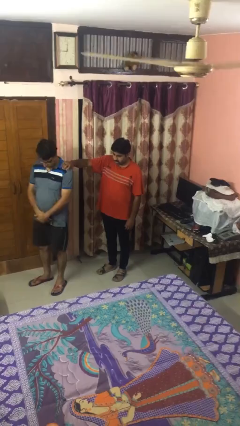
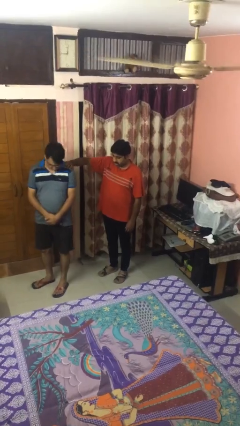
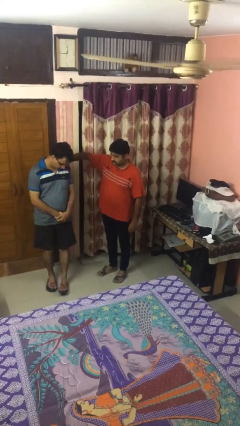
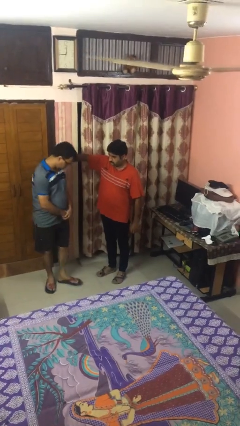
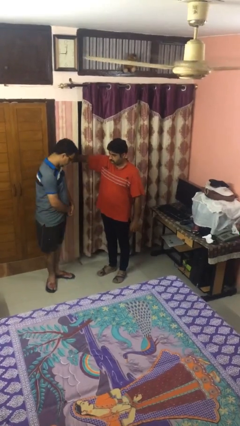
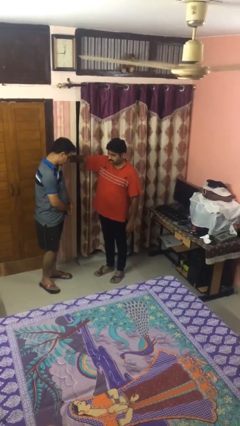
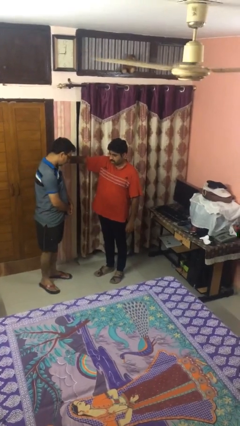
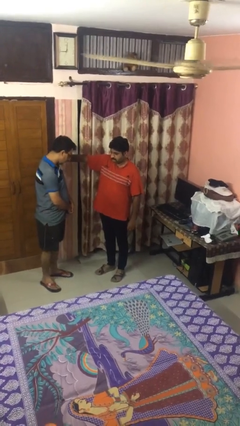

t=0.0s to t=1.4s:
person spins person around

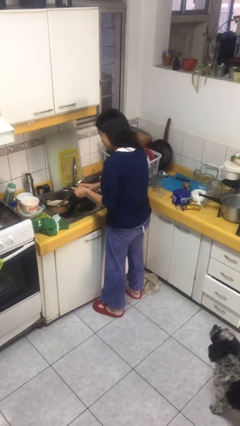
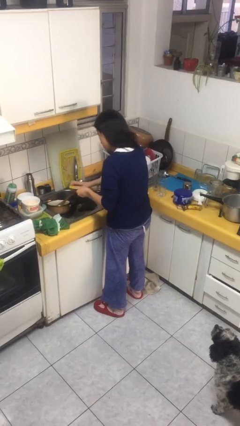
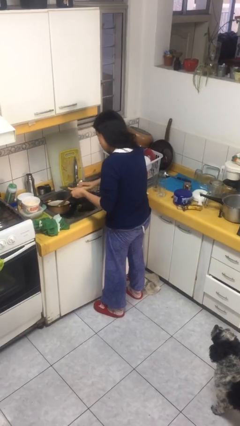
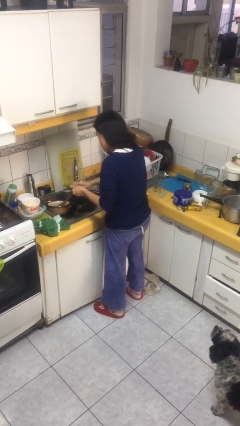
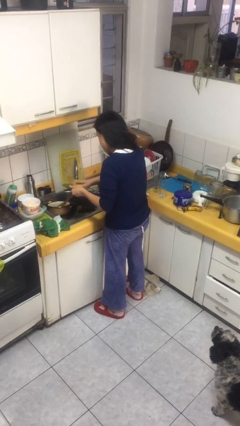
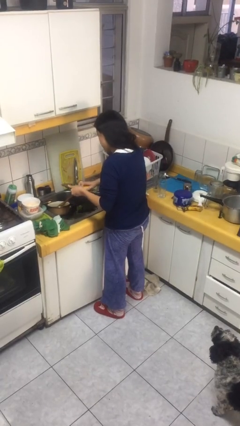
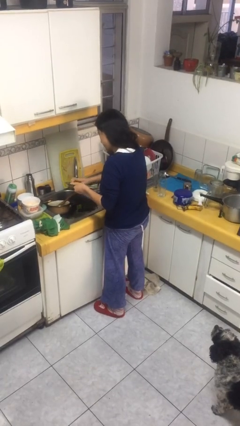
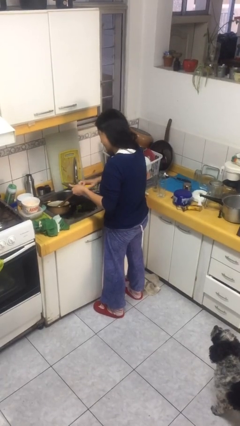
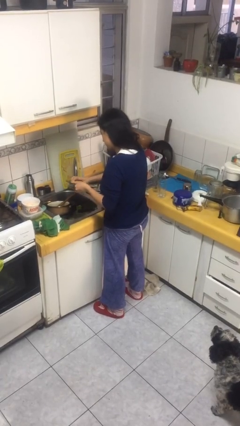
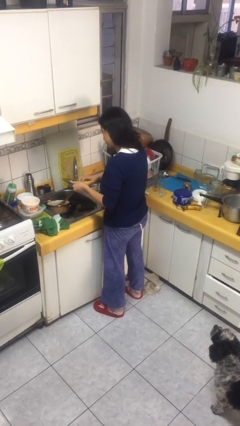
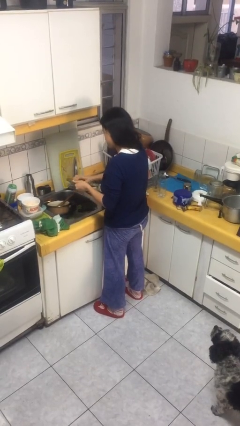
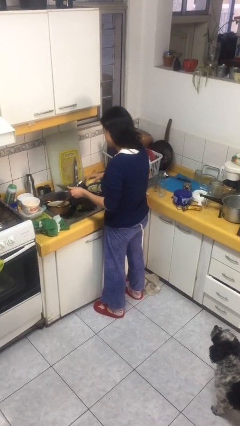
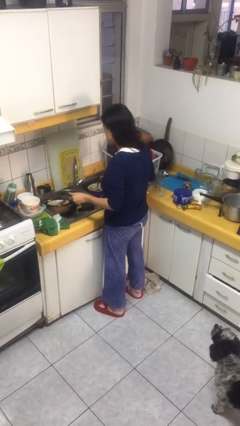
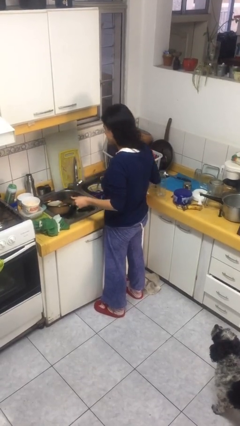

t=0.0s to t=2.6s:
person washes dish

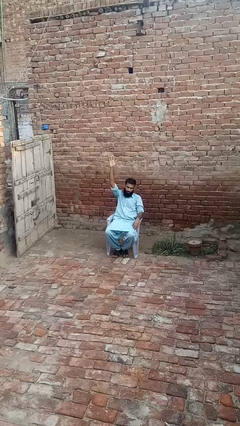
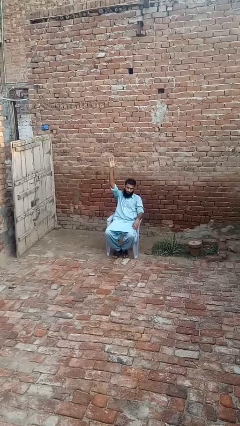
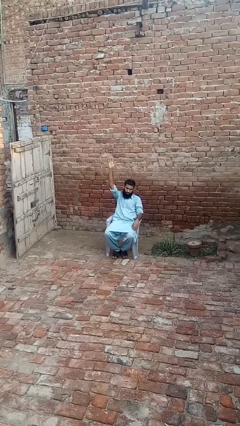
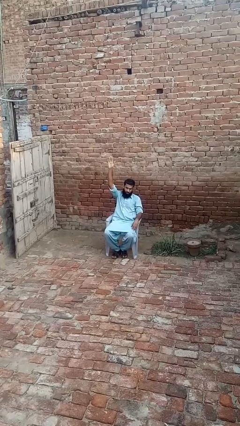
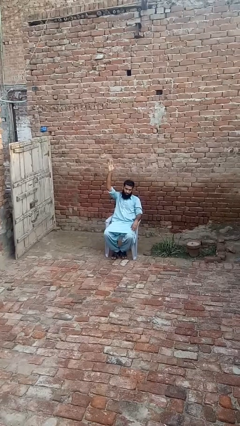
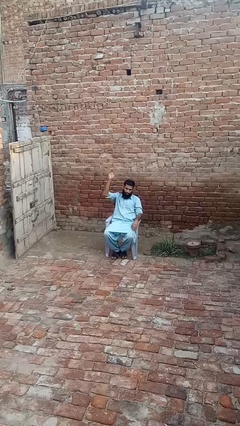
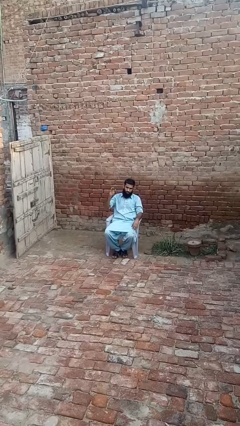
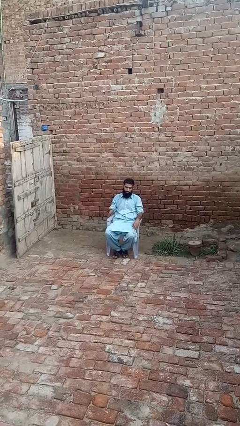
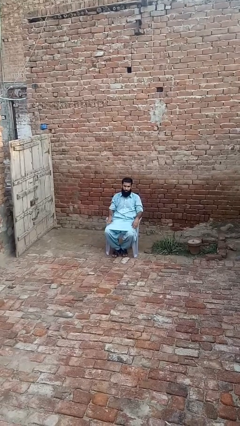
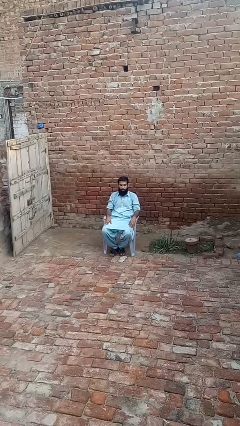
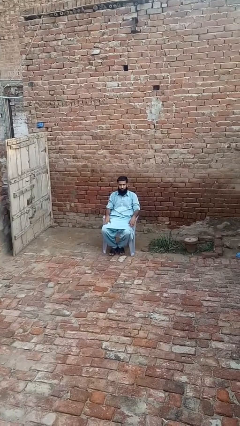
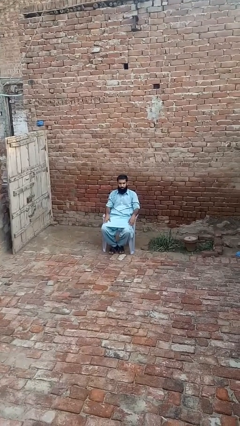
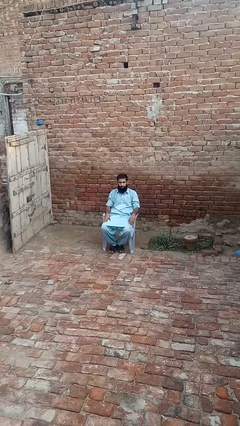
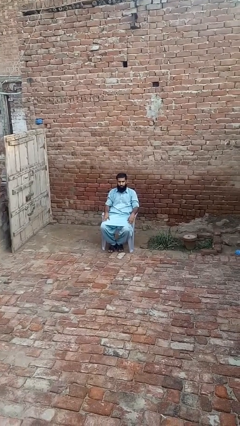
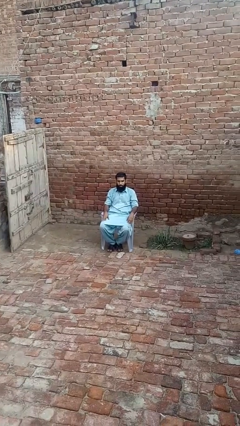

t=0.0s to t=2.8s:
person gestures lower hand

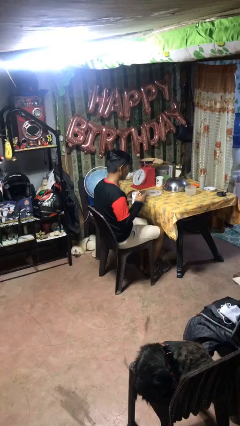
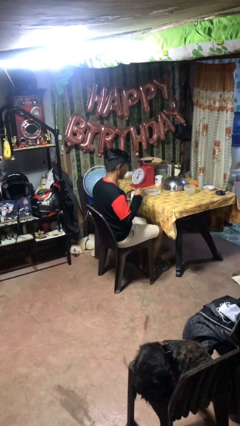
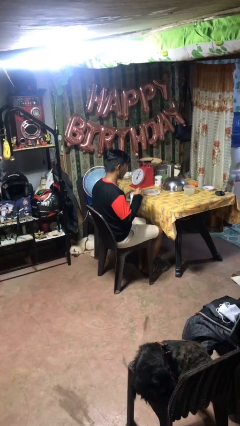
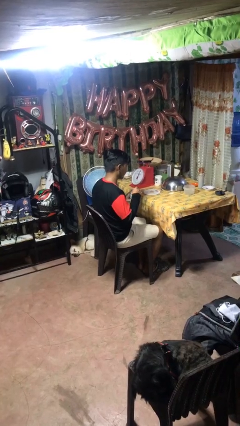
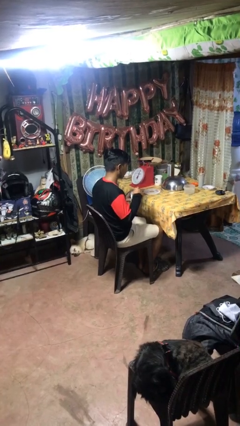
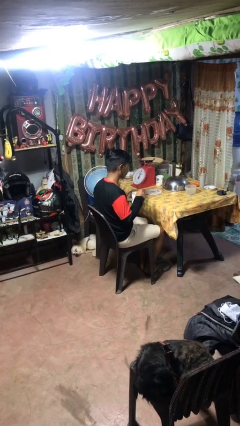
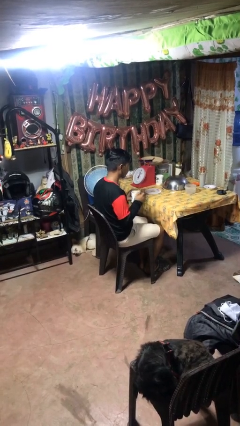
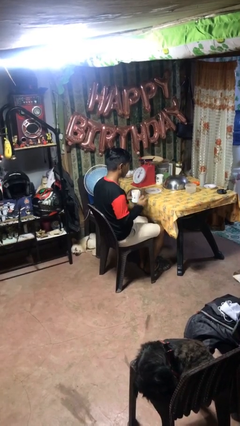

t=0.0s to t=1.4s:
person stirs mug

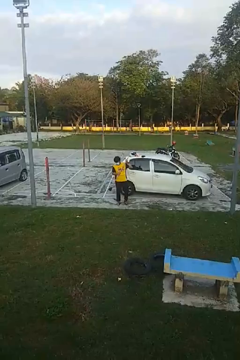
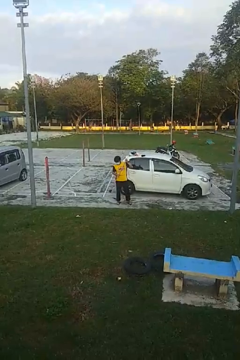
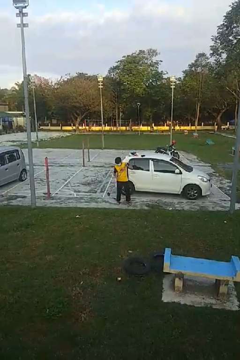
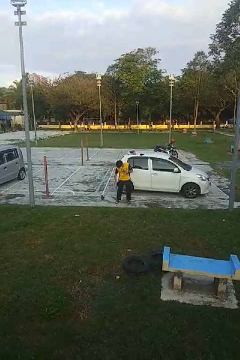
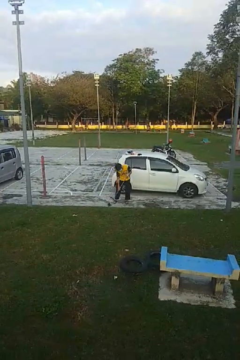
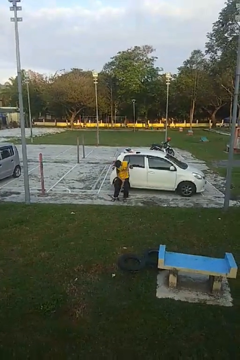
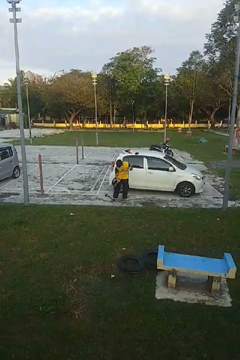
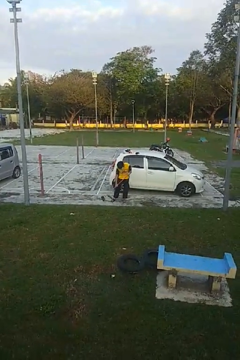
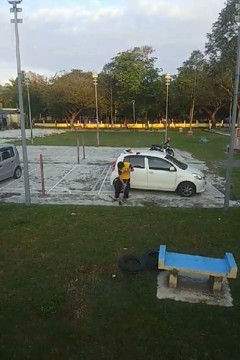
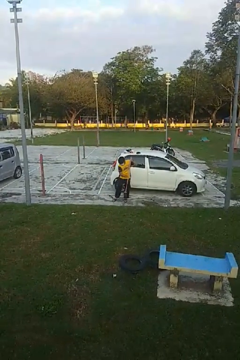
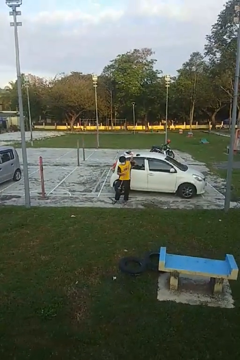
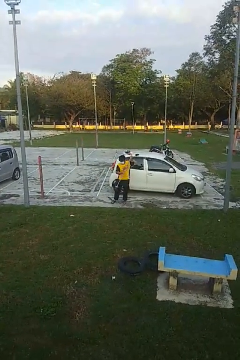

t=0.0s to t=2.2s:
person sweeps floor

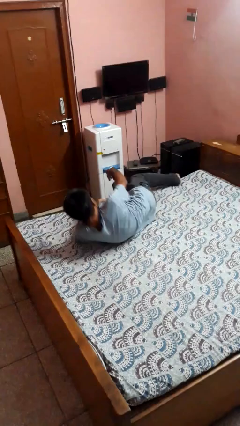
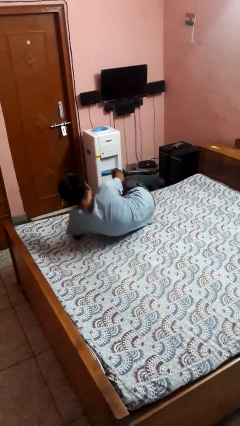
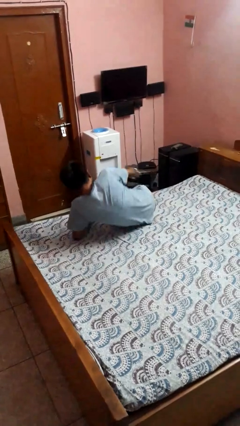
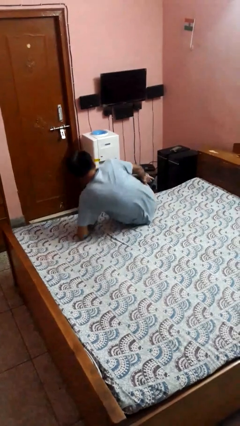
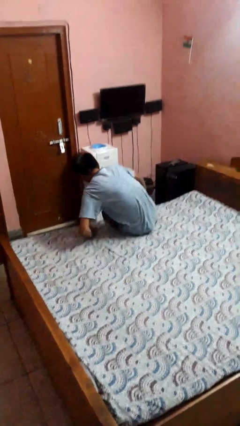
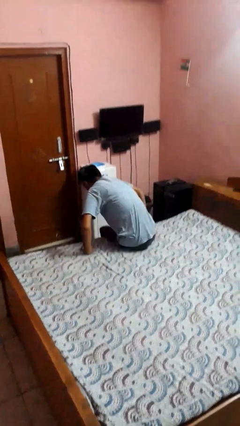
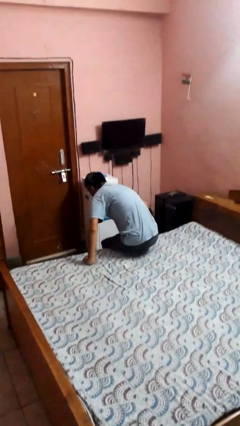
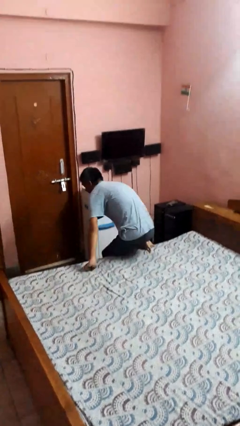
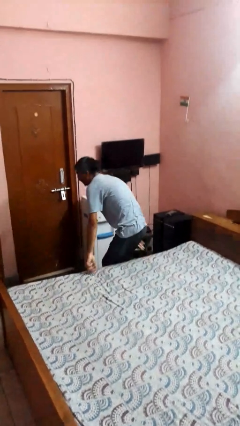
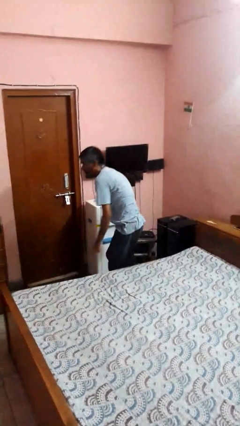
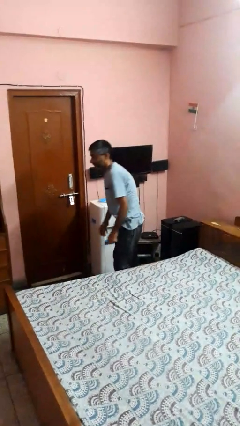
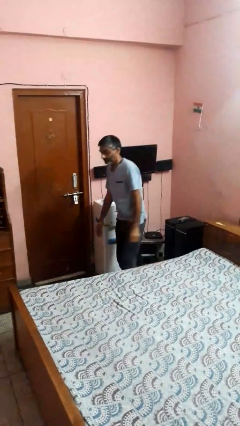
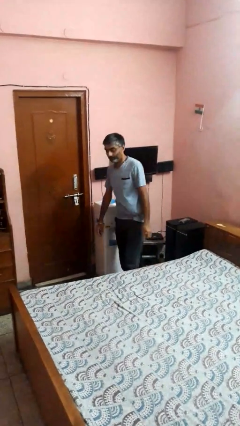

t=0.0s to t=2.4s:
person stands up

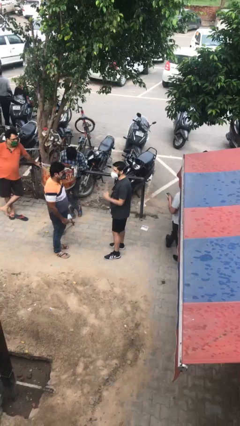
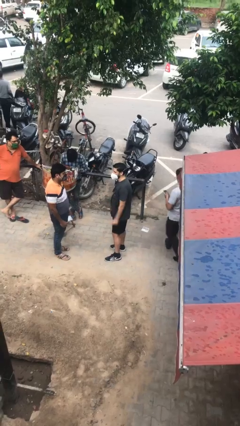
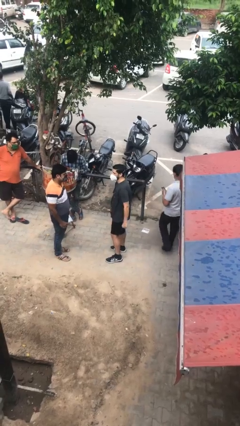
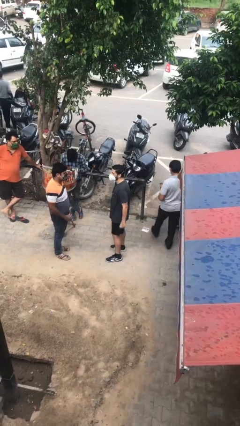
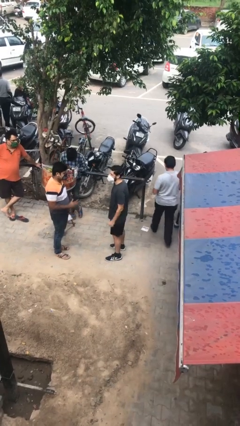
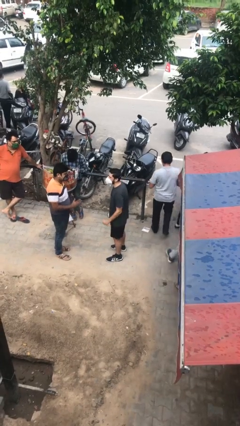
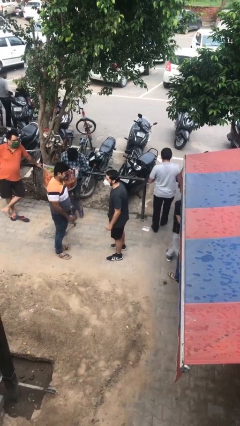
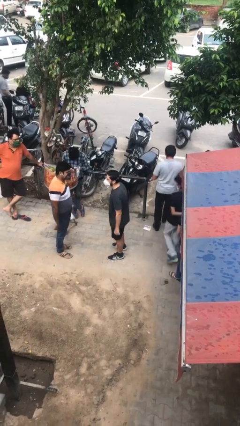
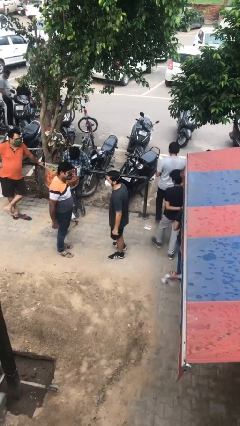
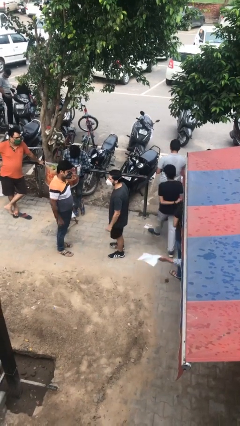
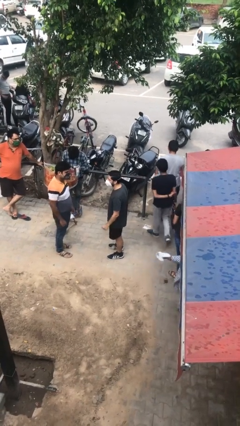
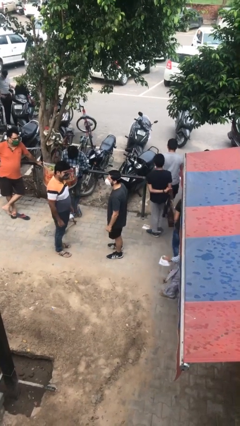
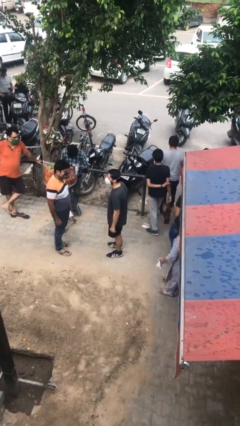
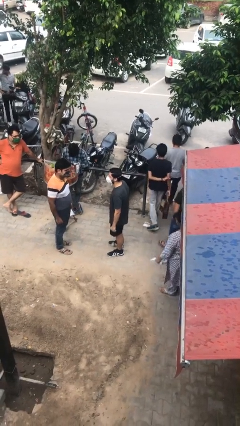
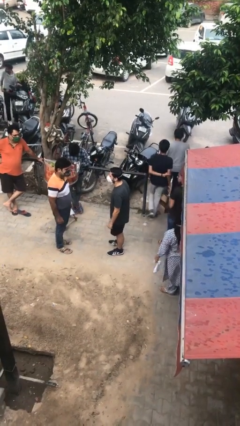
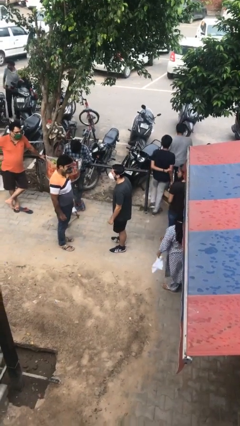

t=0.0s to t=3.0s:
person talks to person

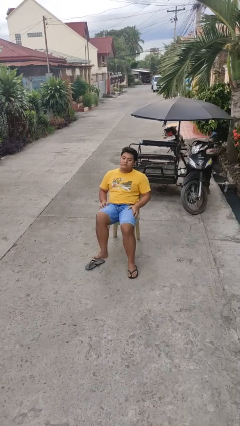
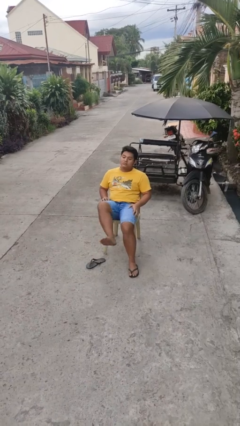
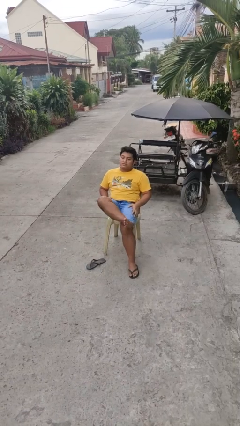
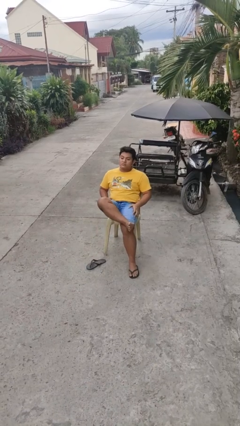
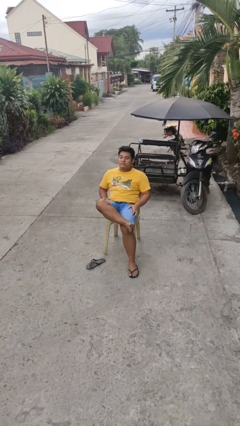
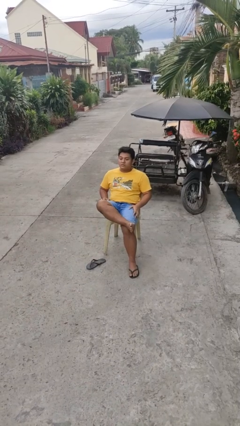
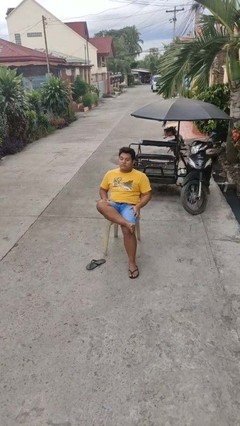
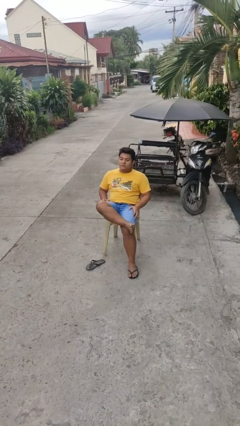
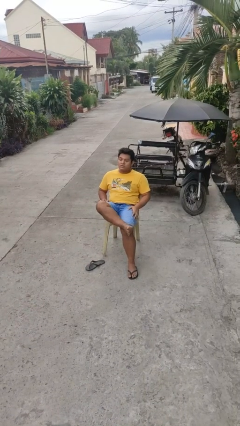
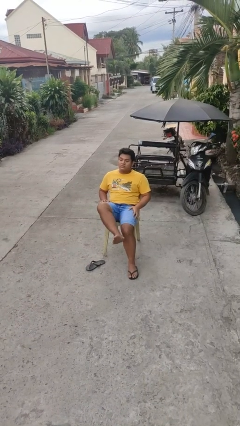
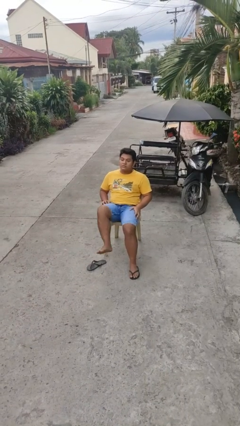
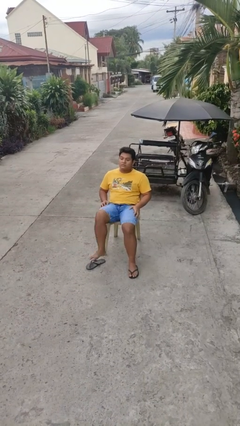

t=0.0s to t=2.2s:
person crosses legs
